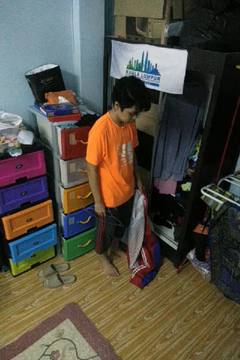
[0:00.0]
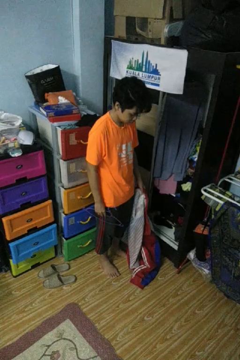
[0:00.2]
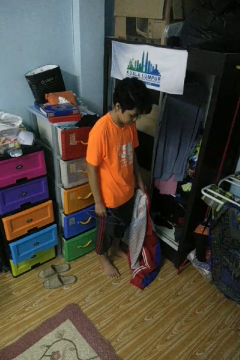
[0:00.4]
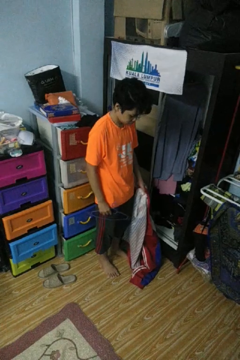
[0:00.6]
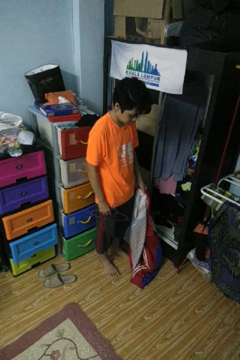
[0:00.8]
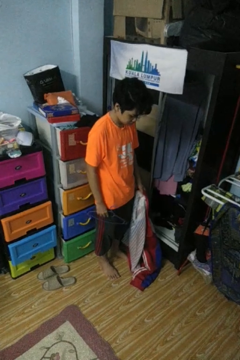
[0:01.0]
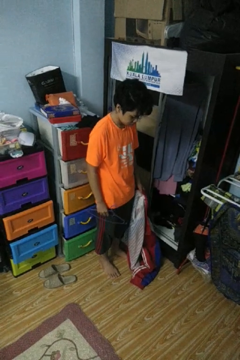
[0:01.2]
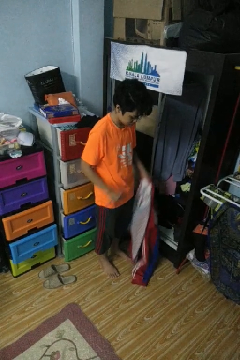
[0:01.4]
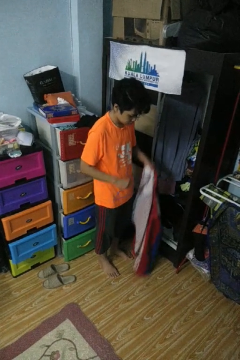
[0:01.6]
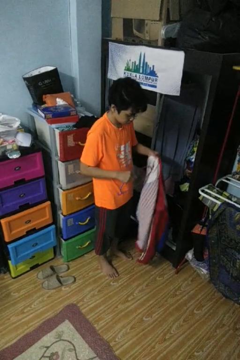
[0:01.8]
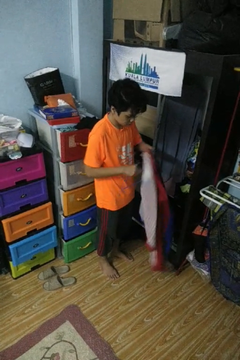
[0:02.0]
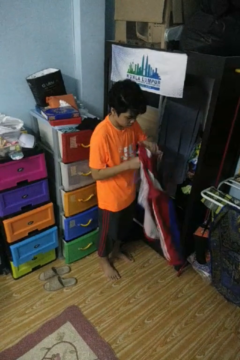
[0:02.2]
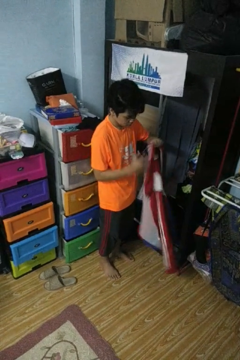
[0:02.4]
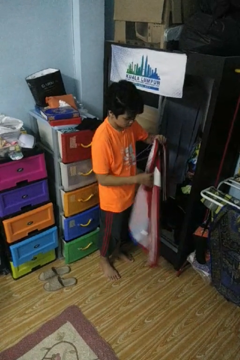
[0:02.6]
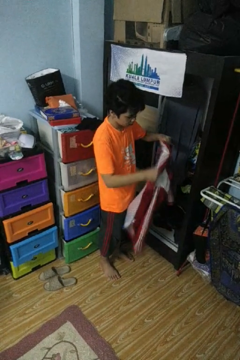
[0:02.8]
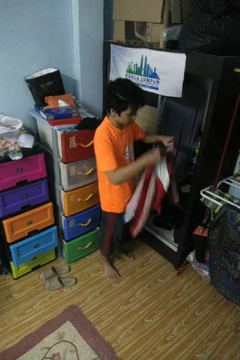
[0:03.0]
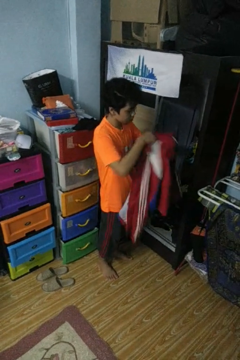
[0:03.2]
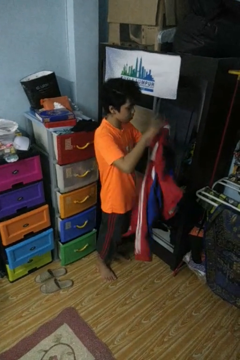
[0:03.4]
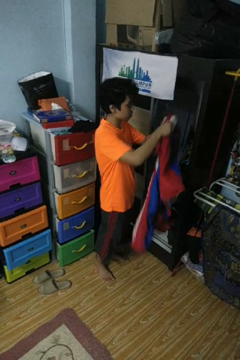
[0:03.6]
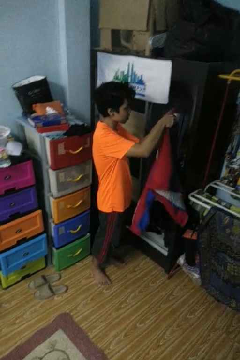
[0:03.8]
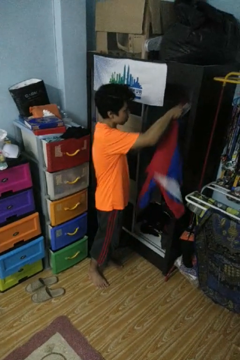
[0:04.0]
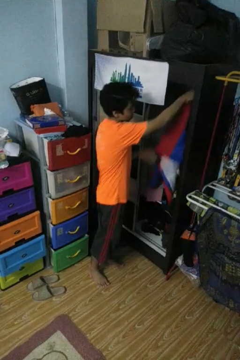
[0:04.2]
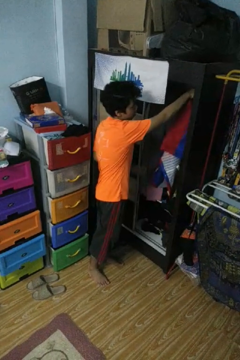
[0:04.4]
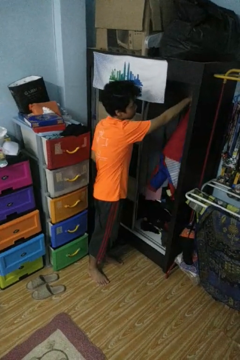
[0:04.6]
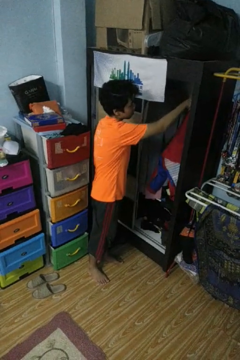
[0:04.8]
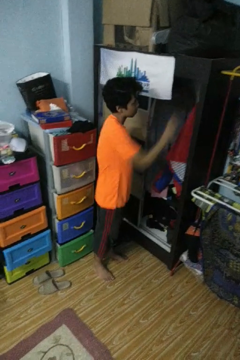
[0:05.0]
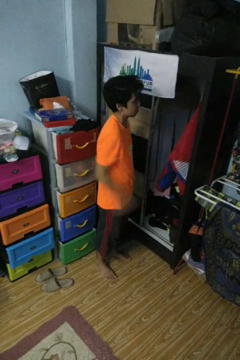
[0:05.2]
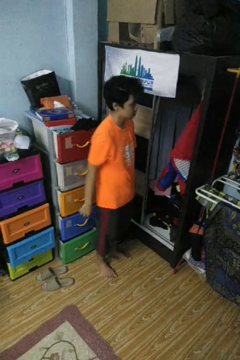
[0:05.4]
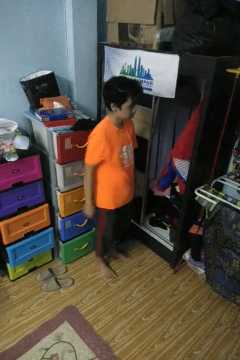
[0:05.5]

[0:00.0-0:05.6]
person puts clothes into closet

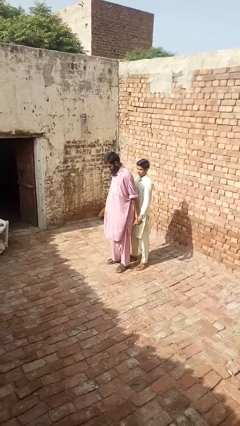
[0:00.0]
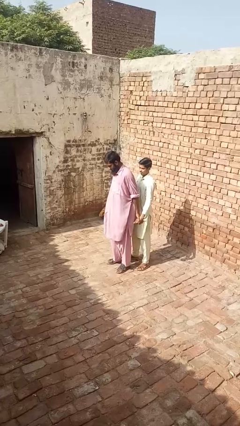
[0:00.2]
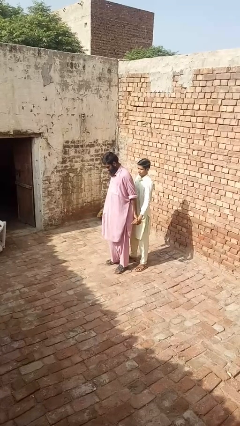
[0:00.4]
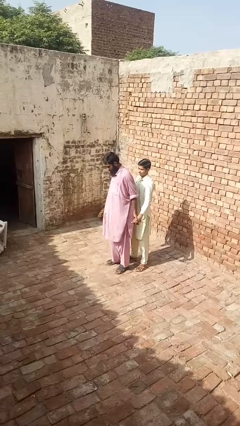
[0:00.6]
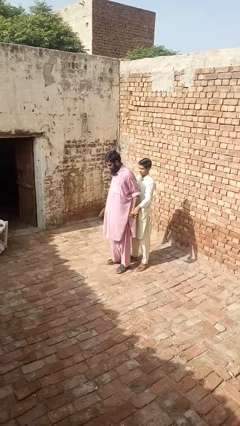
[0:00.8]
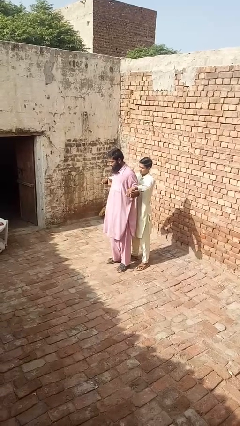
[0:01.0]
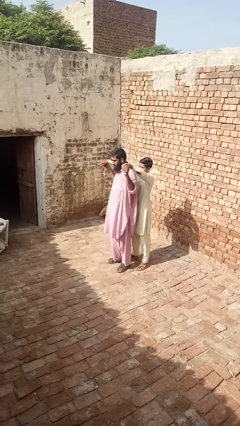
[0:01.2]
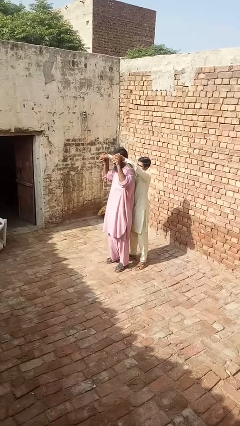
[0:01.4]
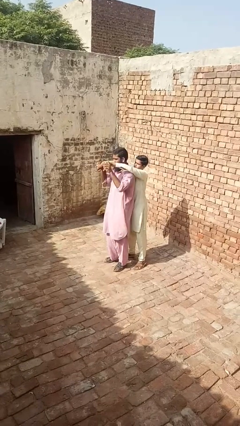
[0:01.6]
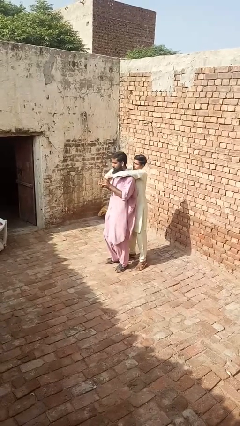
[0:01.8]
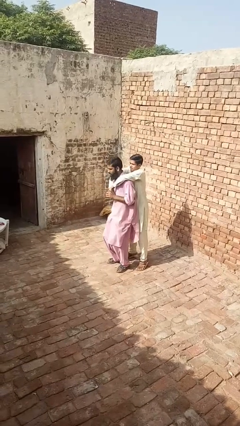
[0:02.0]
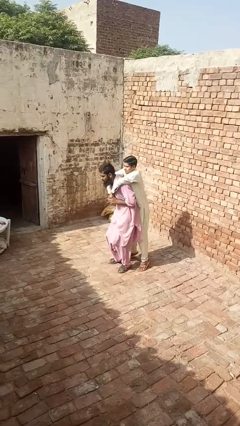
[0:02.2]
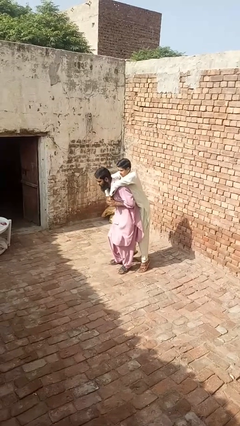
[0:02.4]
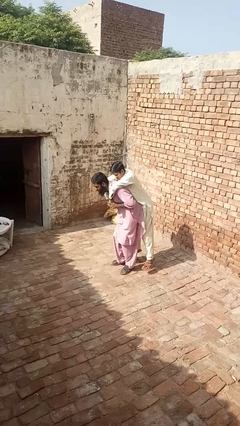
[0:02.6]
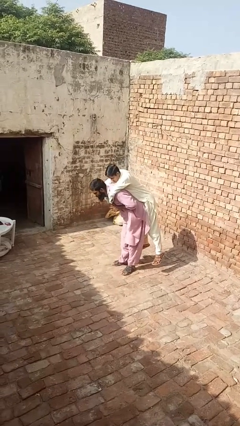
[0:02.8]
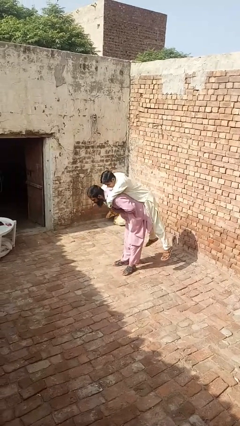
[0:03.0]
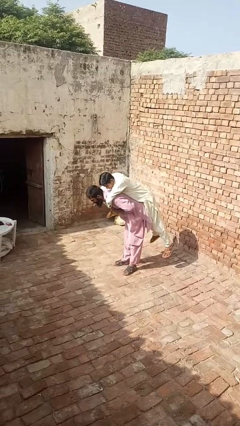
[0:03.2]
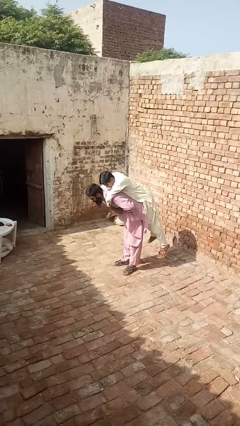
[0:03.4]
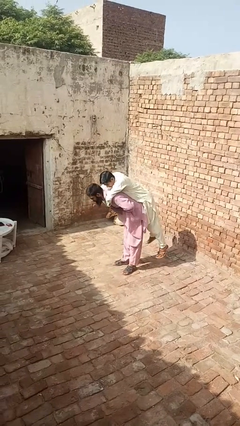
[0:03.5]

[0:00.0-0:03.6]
person carries person over shoulder

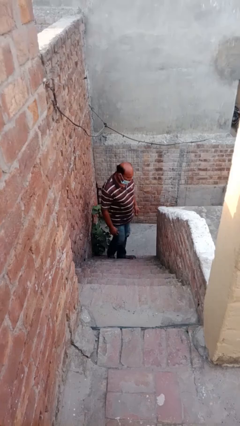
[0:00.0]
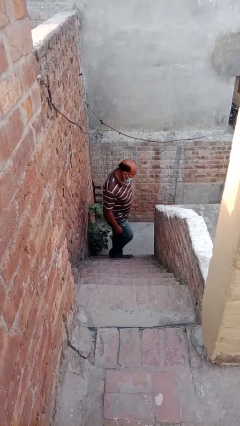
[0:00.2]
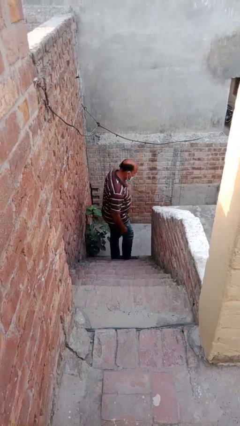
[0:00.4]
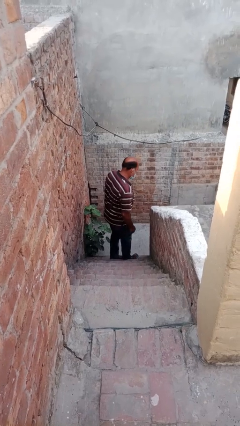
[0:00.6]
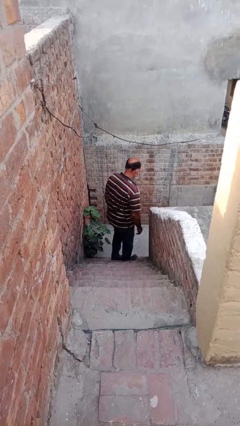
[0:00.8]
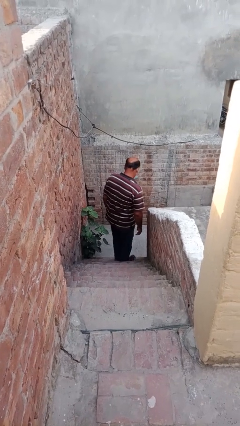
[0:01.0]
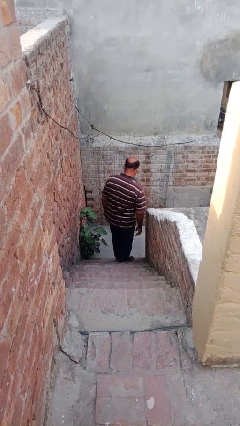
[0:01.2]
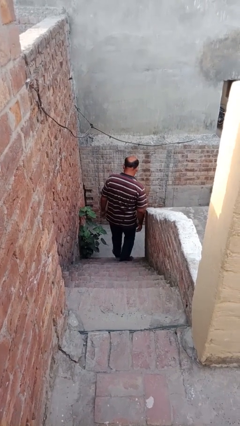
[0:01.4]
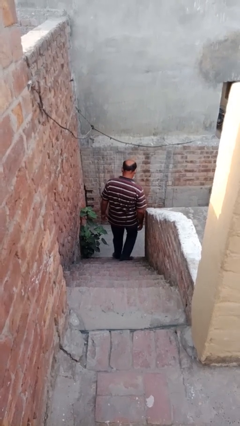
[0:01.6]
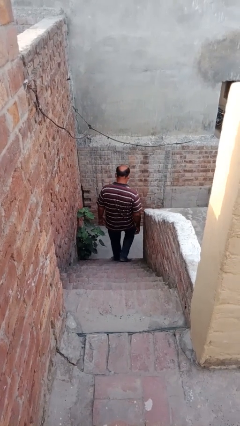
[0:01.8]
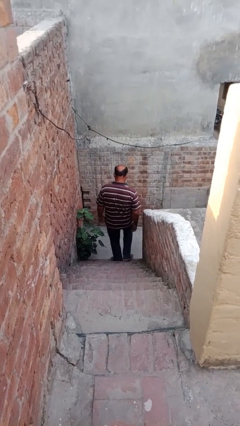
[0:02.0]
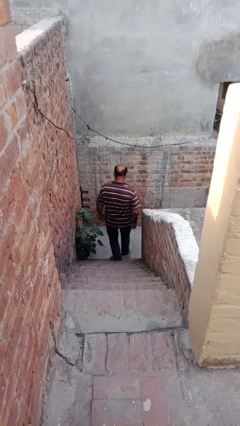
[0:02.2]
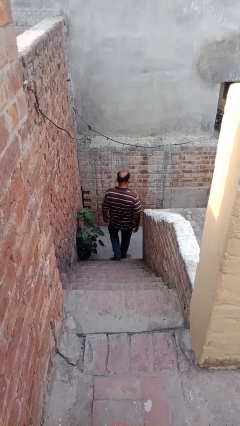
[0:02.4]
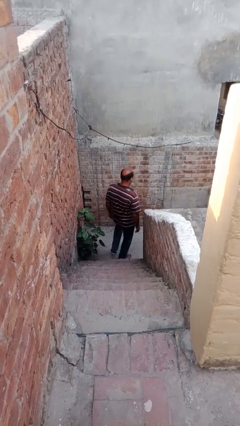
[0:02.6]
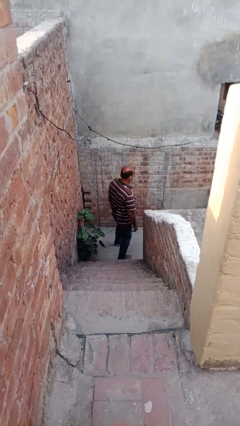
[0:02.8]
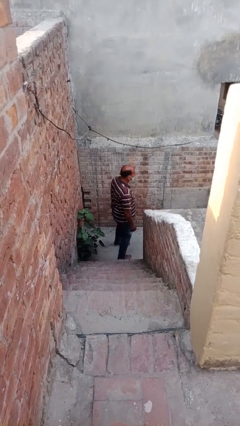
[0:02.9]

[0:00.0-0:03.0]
person climbs down stairs

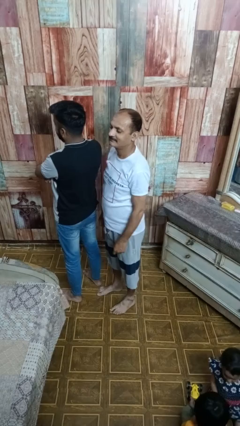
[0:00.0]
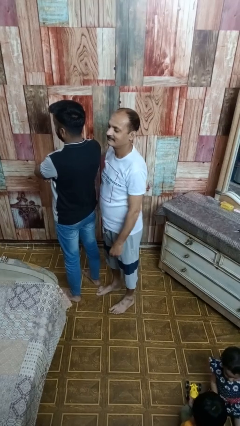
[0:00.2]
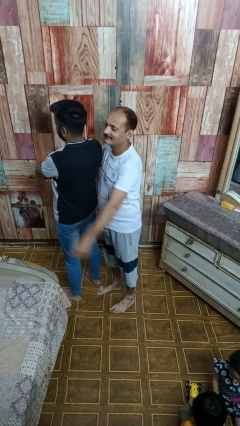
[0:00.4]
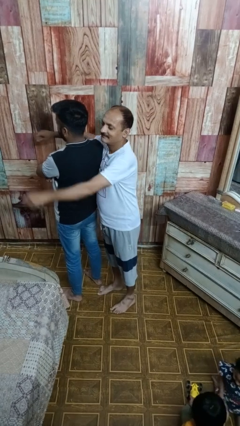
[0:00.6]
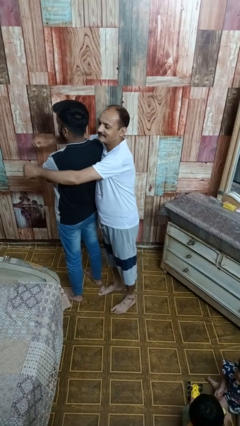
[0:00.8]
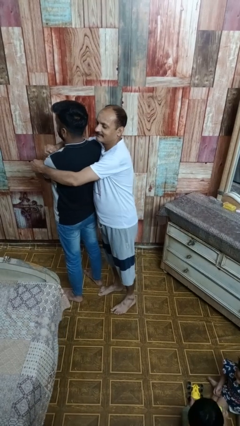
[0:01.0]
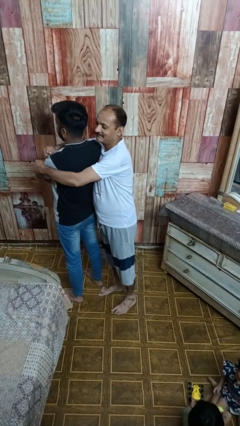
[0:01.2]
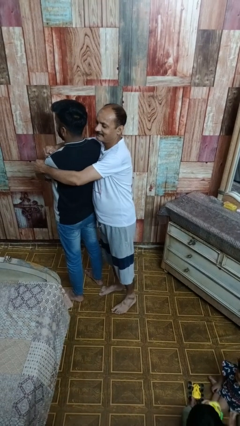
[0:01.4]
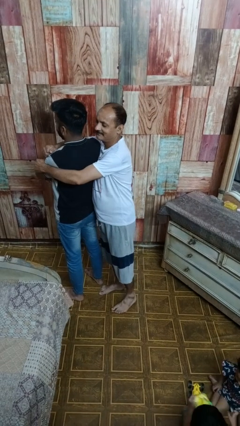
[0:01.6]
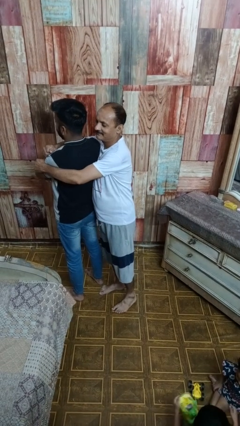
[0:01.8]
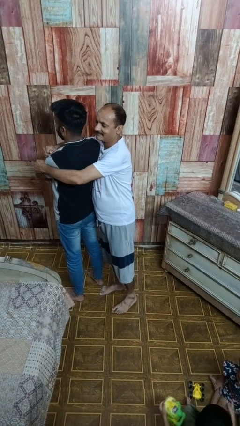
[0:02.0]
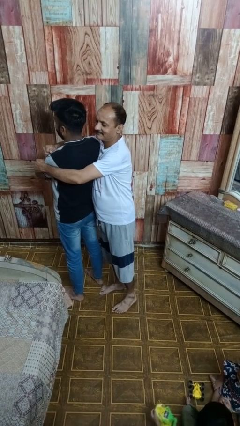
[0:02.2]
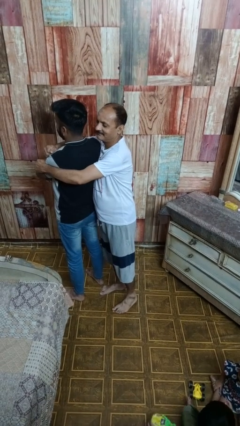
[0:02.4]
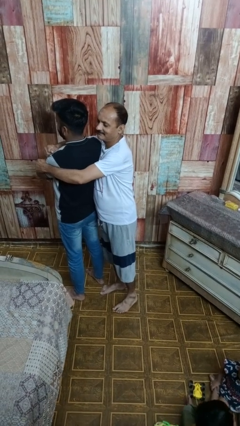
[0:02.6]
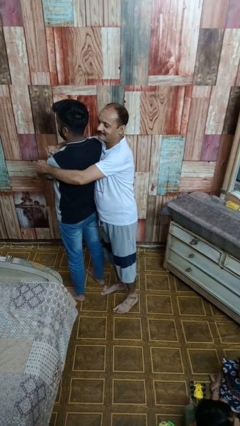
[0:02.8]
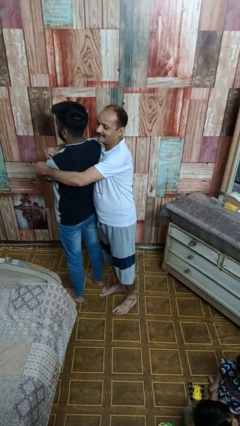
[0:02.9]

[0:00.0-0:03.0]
person hugs person from behind

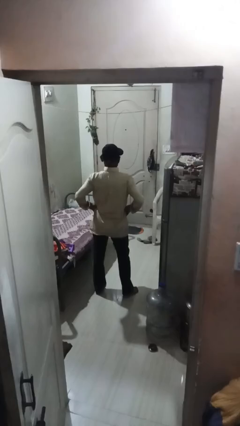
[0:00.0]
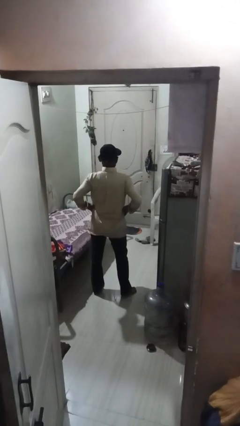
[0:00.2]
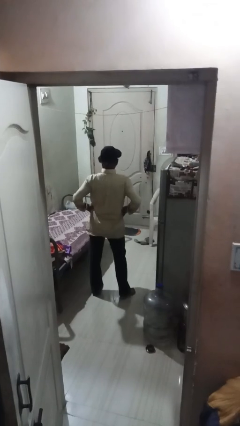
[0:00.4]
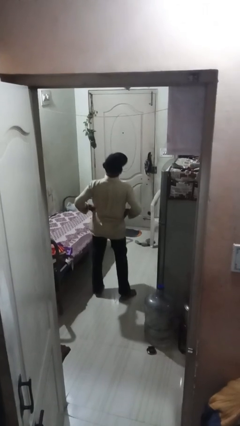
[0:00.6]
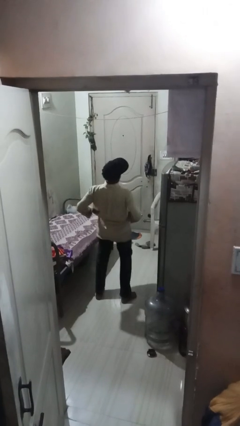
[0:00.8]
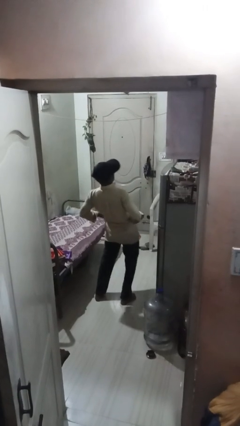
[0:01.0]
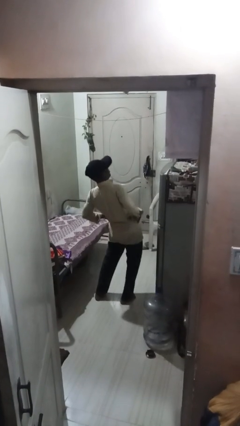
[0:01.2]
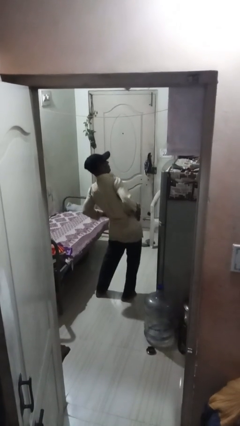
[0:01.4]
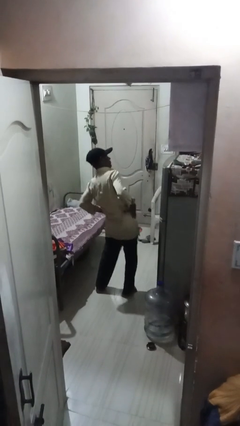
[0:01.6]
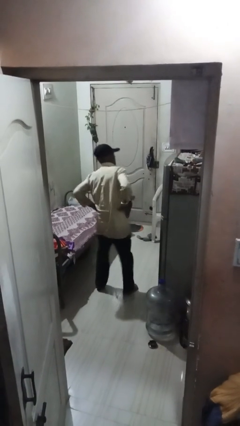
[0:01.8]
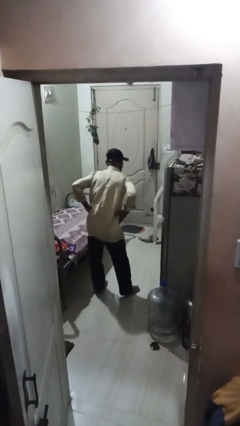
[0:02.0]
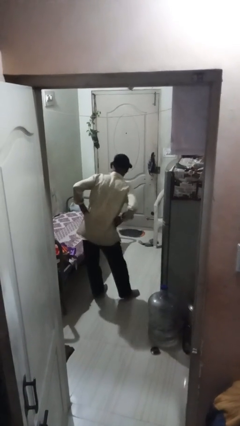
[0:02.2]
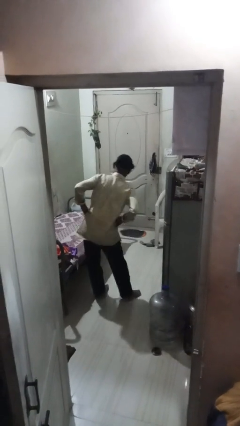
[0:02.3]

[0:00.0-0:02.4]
person wiggles hips

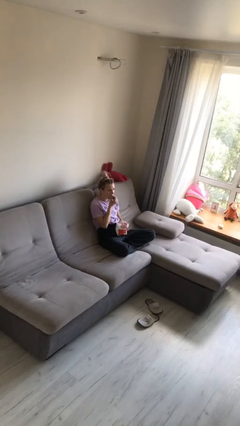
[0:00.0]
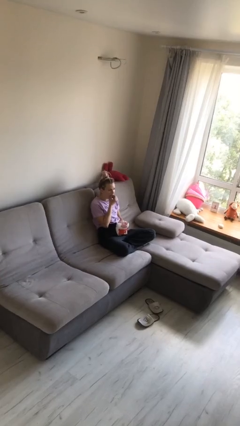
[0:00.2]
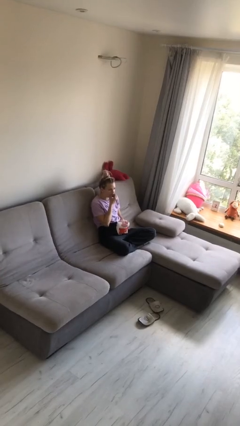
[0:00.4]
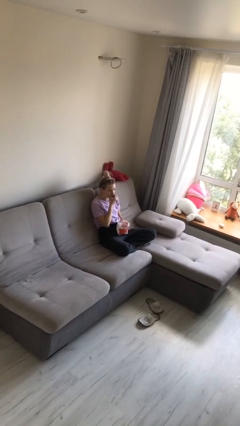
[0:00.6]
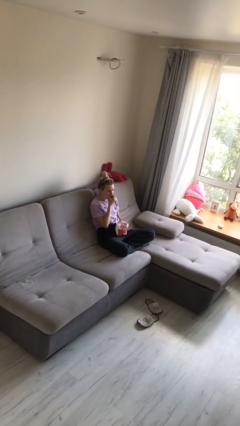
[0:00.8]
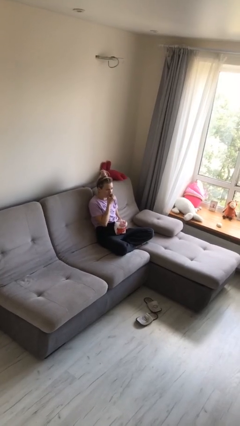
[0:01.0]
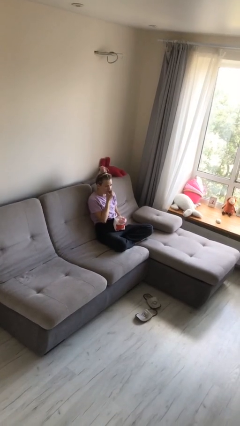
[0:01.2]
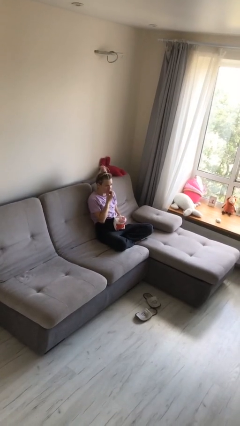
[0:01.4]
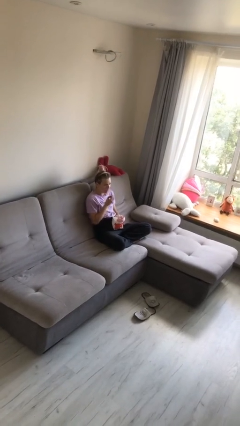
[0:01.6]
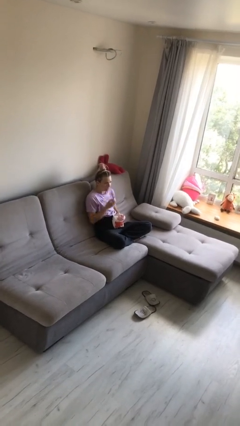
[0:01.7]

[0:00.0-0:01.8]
person eats snack from bag
